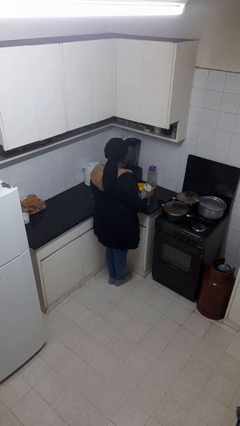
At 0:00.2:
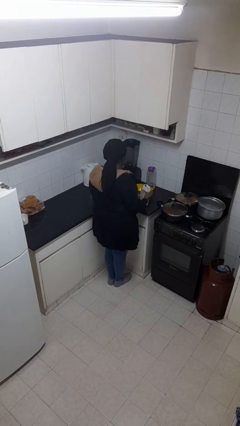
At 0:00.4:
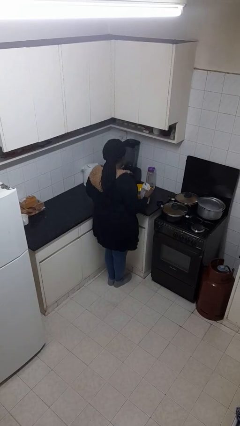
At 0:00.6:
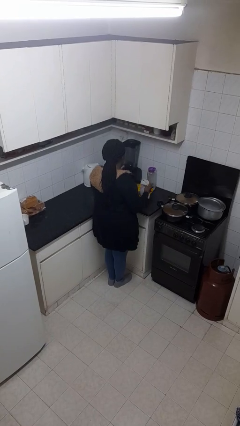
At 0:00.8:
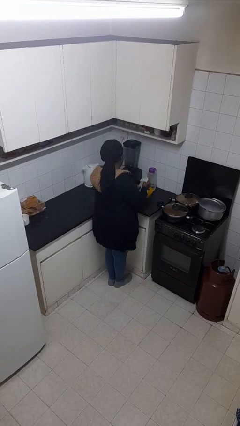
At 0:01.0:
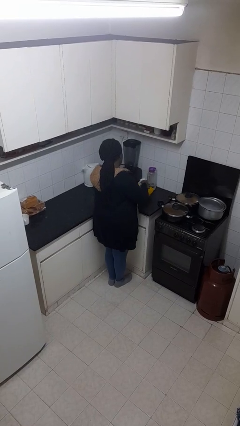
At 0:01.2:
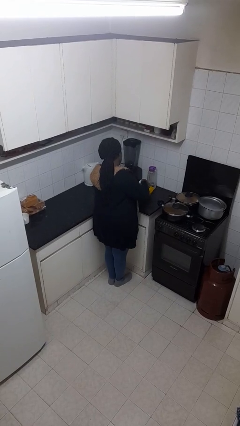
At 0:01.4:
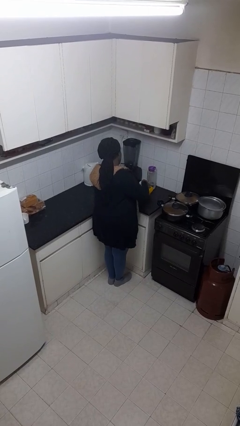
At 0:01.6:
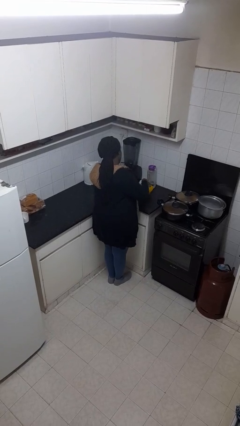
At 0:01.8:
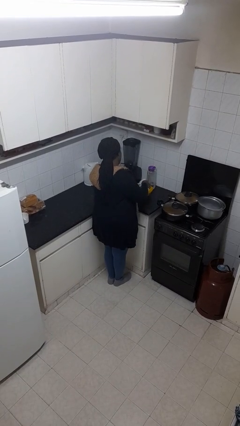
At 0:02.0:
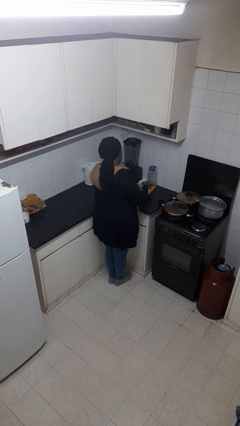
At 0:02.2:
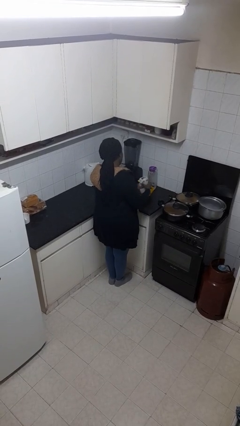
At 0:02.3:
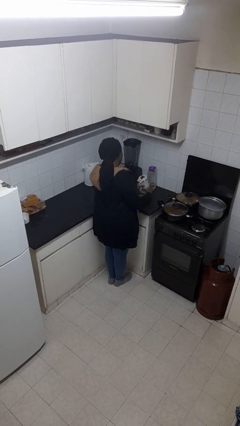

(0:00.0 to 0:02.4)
person pours into bowl

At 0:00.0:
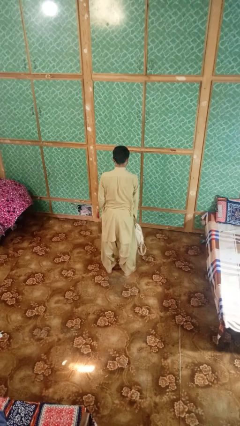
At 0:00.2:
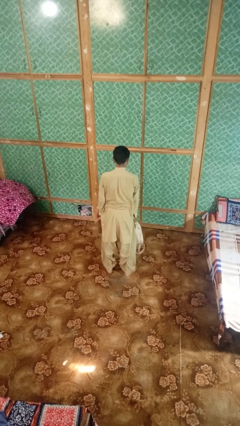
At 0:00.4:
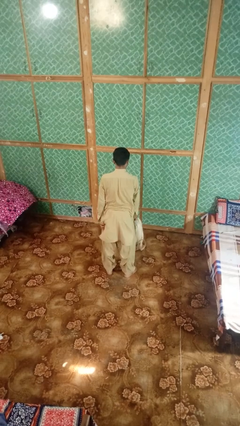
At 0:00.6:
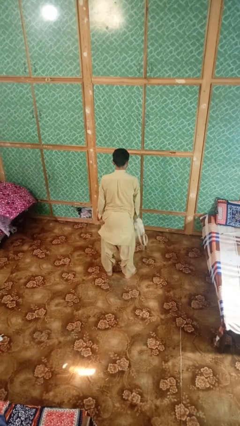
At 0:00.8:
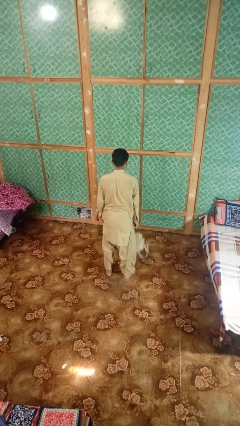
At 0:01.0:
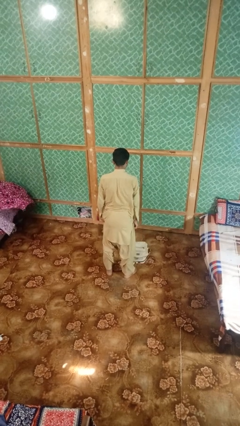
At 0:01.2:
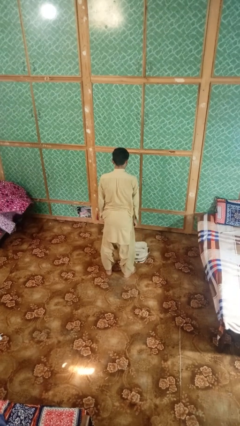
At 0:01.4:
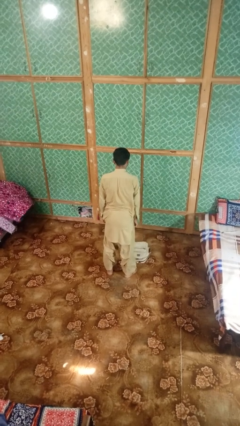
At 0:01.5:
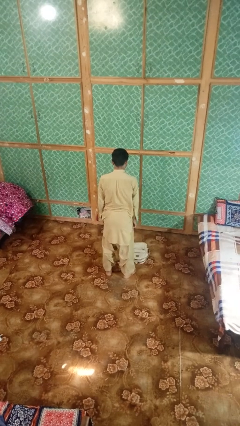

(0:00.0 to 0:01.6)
person throws object to ground

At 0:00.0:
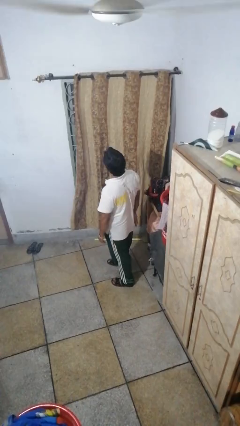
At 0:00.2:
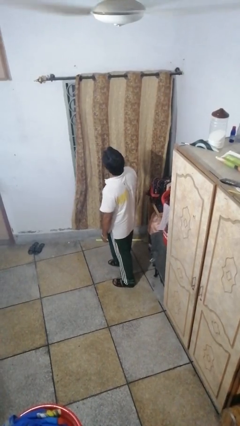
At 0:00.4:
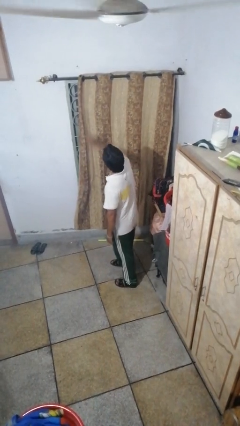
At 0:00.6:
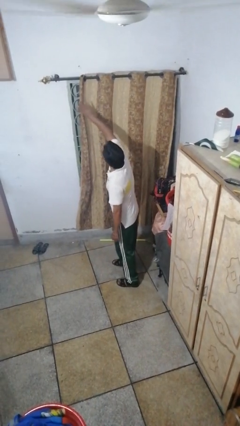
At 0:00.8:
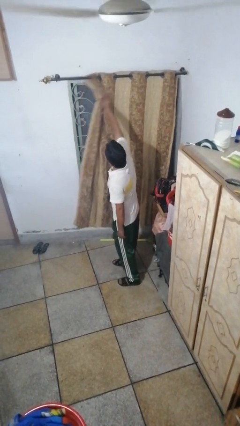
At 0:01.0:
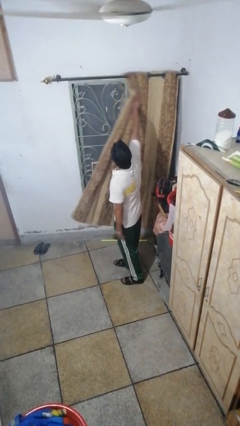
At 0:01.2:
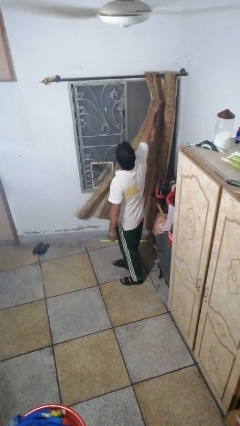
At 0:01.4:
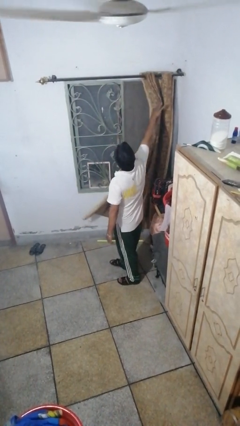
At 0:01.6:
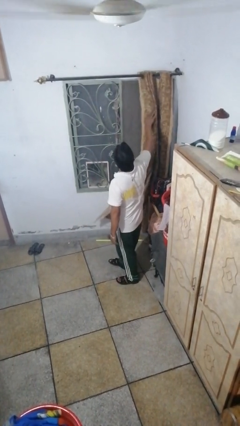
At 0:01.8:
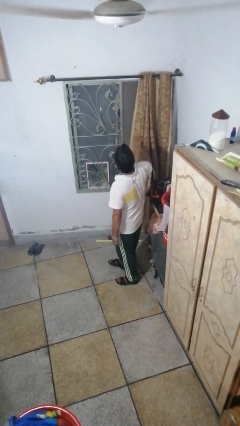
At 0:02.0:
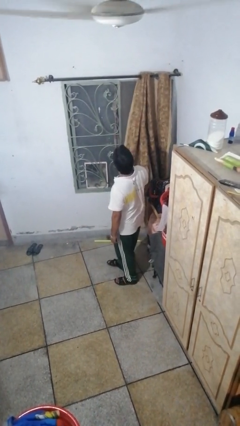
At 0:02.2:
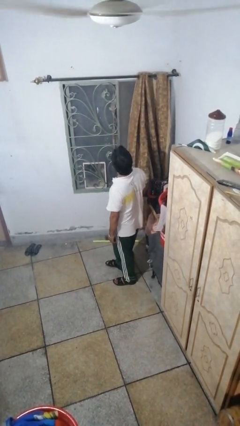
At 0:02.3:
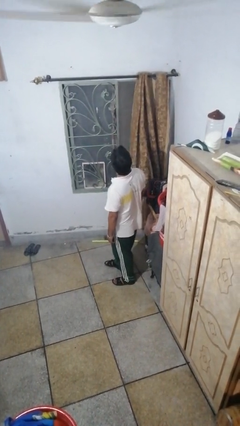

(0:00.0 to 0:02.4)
person opens curtains

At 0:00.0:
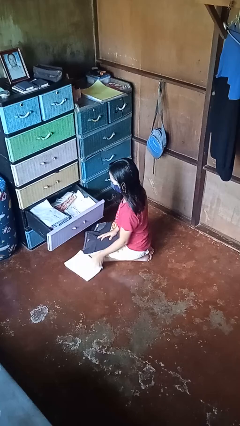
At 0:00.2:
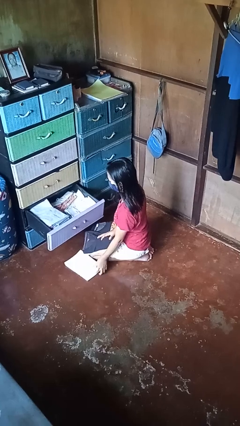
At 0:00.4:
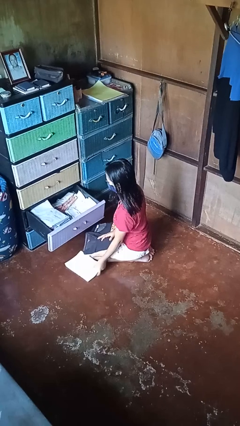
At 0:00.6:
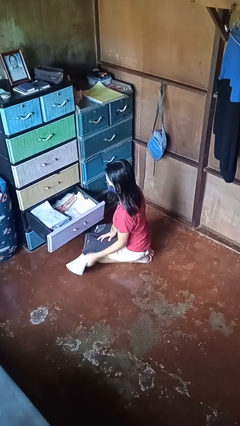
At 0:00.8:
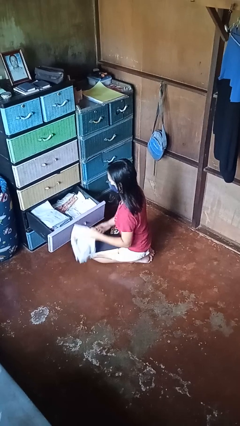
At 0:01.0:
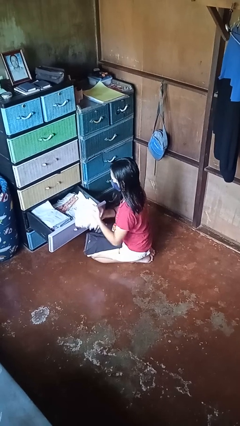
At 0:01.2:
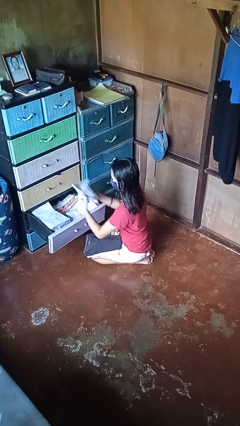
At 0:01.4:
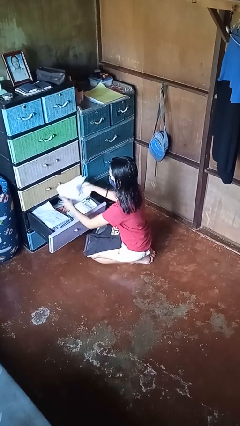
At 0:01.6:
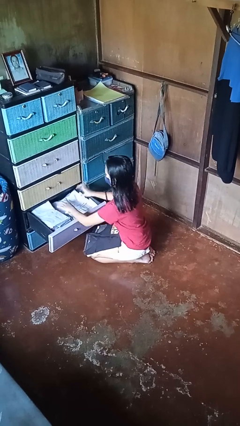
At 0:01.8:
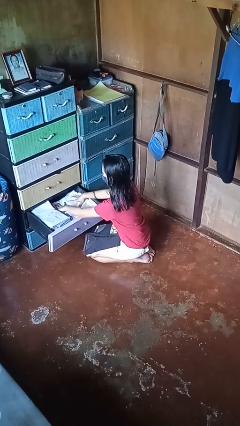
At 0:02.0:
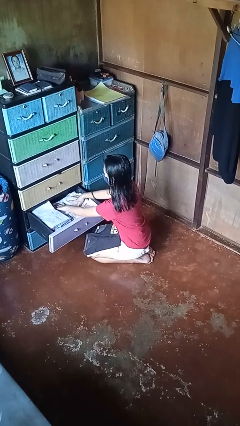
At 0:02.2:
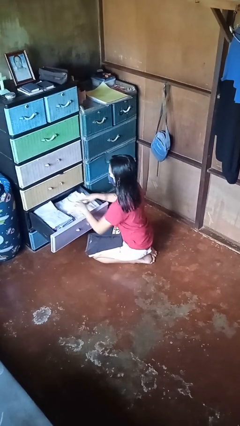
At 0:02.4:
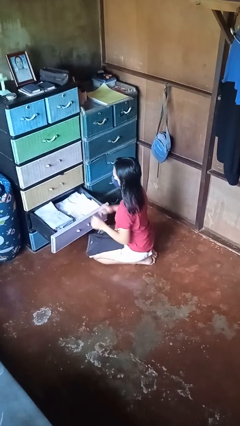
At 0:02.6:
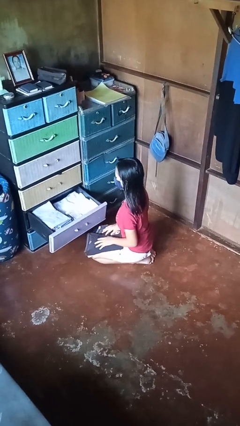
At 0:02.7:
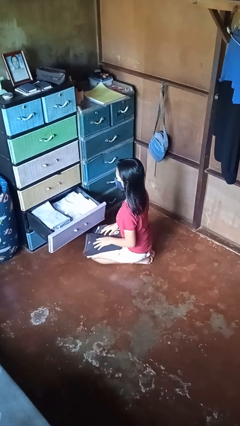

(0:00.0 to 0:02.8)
person puts clothes into dresser

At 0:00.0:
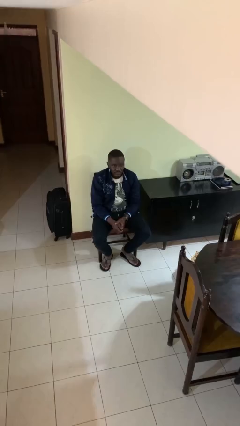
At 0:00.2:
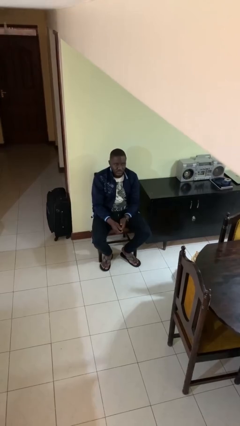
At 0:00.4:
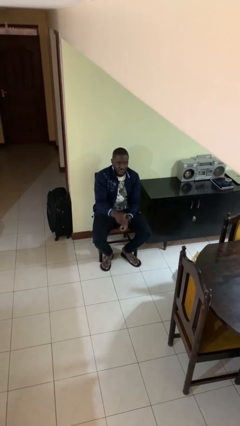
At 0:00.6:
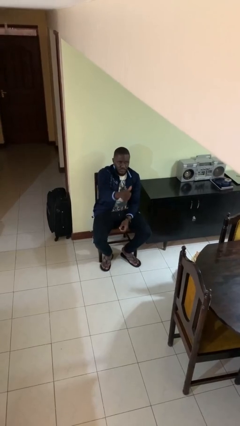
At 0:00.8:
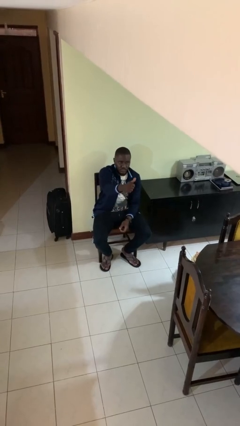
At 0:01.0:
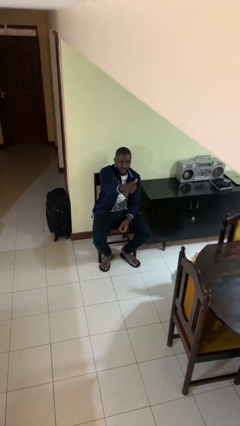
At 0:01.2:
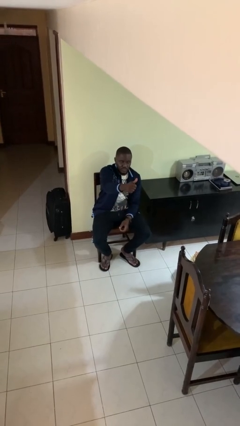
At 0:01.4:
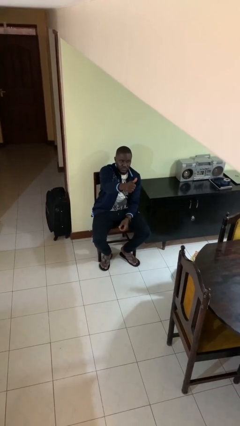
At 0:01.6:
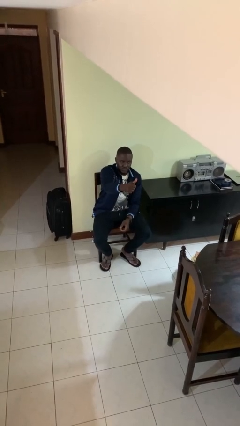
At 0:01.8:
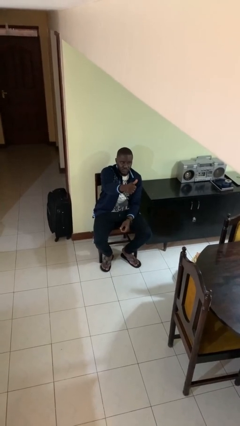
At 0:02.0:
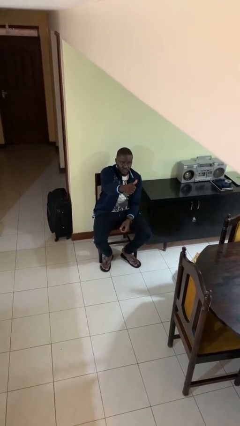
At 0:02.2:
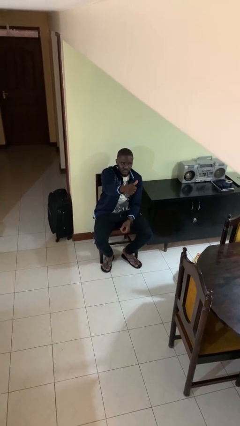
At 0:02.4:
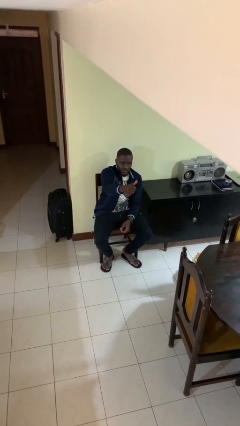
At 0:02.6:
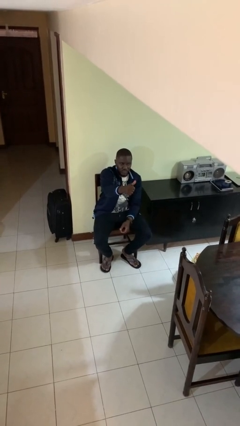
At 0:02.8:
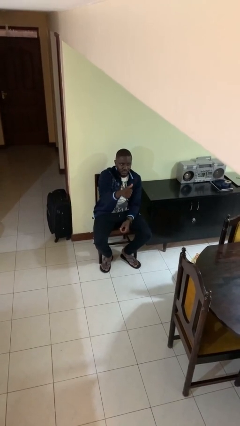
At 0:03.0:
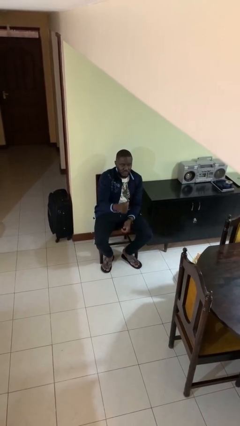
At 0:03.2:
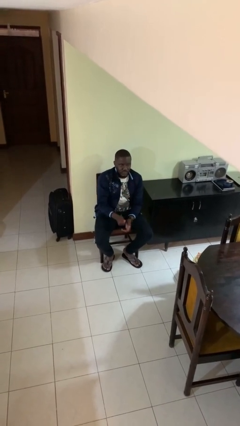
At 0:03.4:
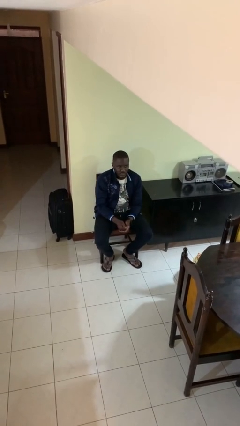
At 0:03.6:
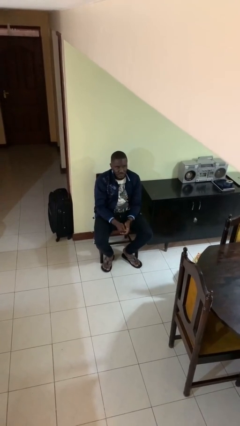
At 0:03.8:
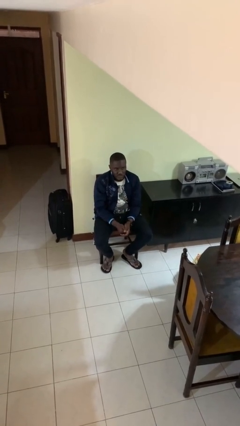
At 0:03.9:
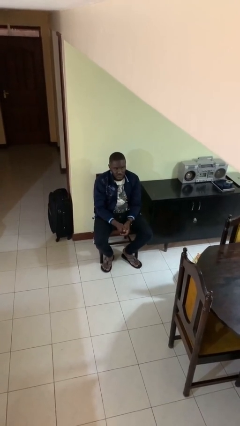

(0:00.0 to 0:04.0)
person gestures thumbs up

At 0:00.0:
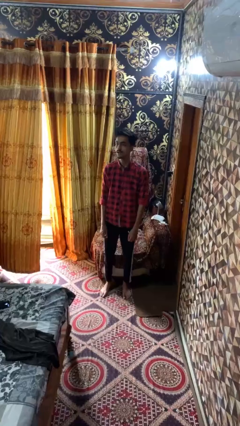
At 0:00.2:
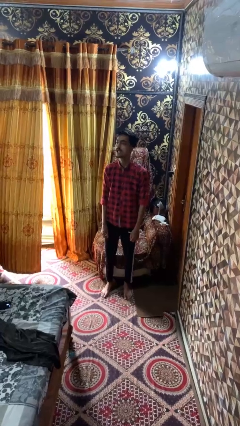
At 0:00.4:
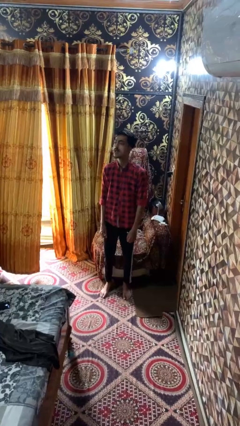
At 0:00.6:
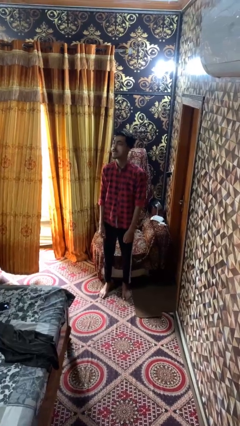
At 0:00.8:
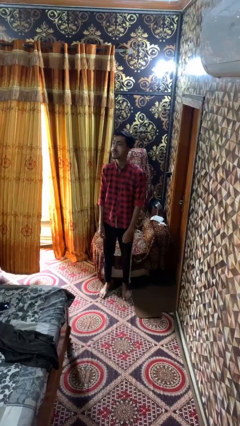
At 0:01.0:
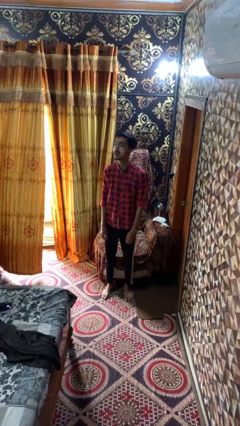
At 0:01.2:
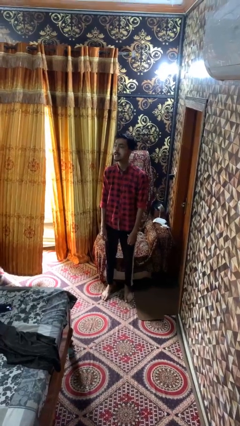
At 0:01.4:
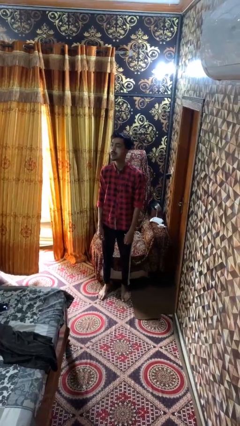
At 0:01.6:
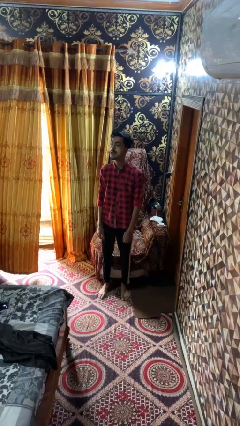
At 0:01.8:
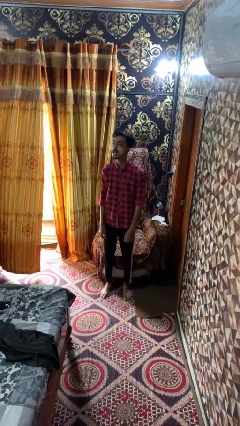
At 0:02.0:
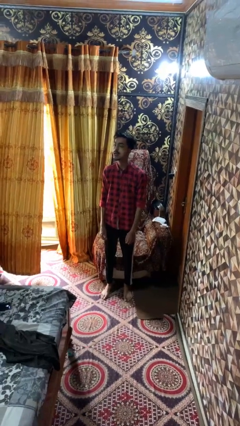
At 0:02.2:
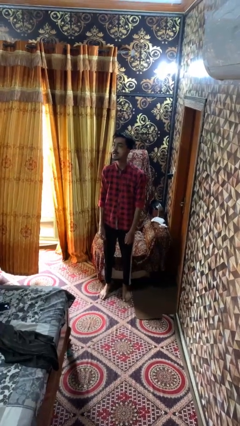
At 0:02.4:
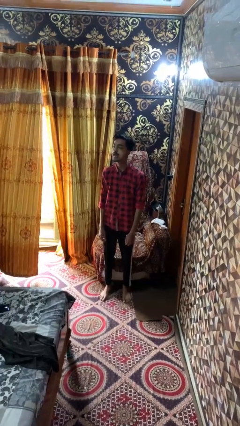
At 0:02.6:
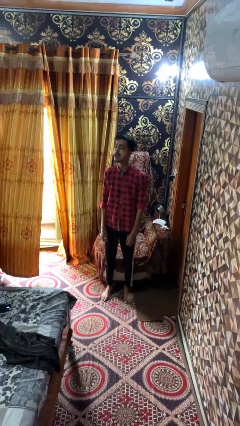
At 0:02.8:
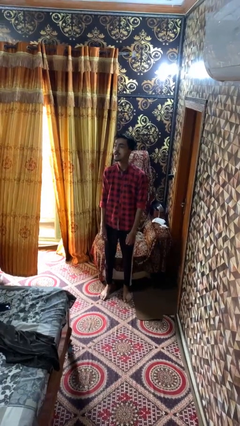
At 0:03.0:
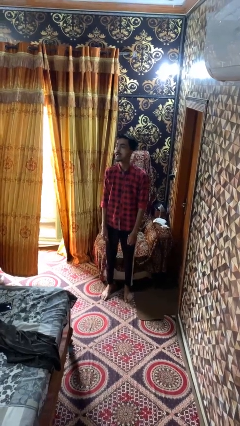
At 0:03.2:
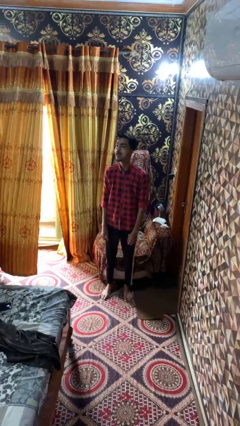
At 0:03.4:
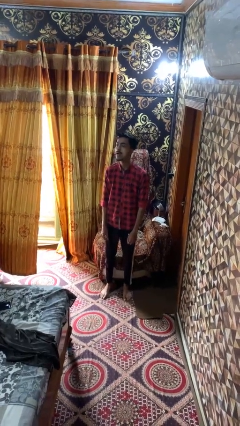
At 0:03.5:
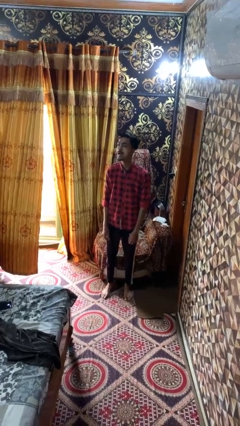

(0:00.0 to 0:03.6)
person sticks out tongue

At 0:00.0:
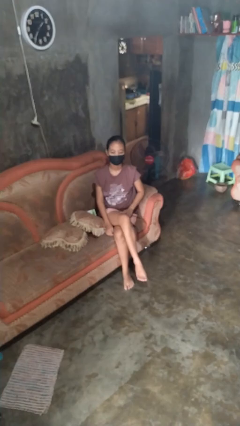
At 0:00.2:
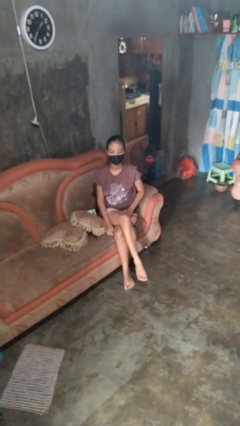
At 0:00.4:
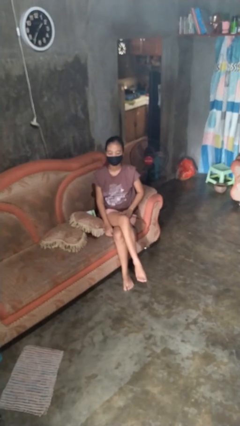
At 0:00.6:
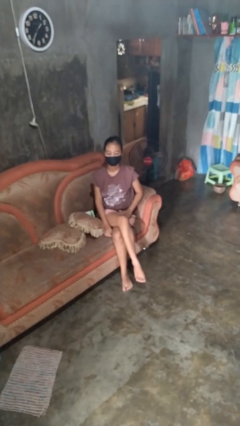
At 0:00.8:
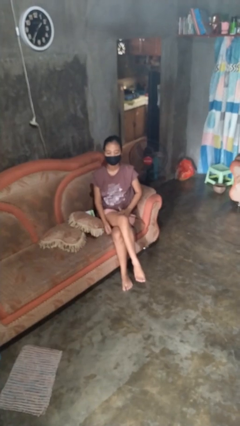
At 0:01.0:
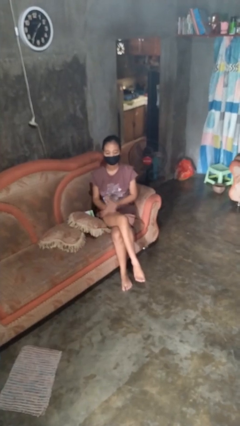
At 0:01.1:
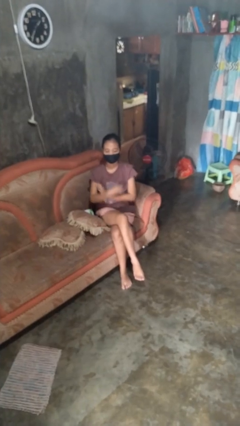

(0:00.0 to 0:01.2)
person crosses arms
